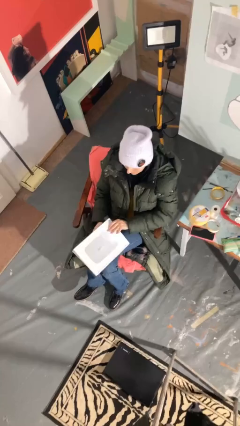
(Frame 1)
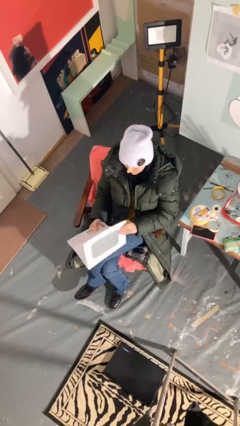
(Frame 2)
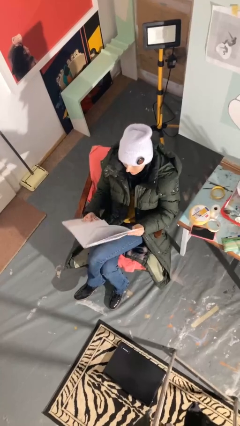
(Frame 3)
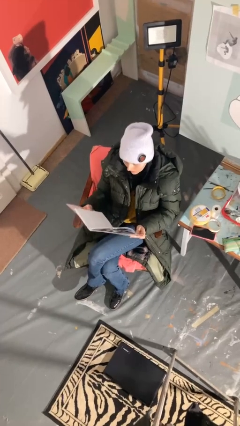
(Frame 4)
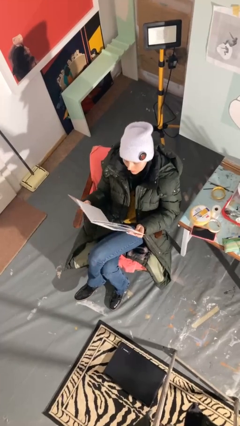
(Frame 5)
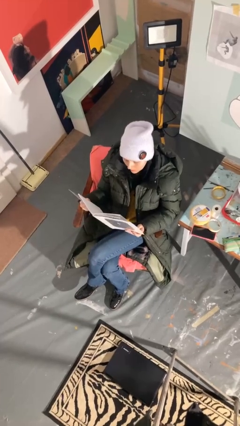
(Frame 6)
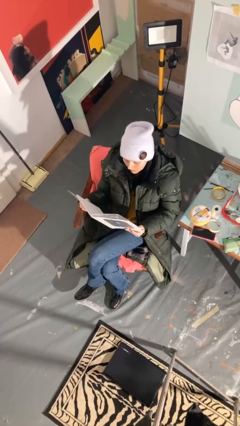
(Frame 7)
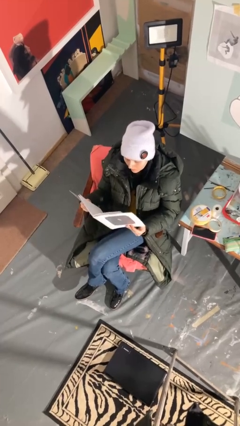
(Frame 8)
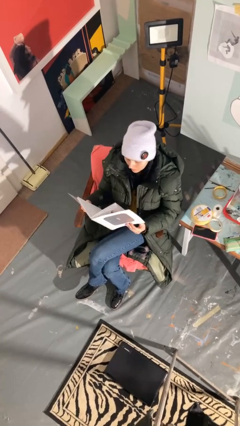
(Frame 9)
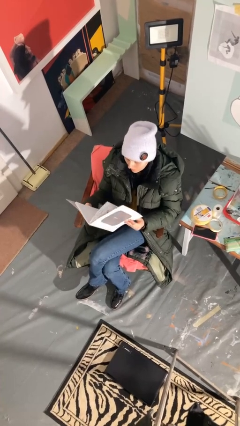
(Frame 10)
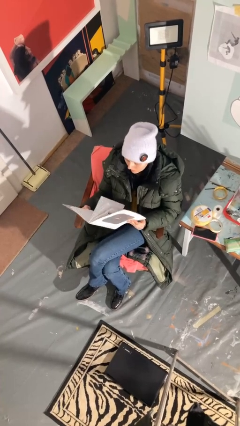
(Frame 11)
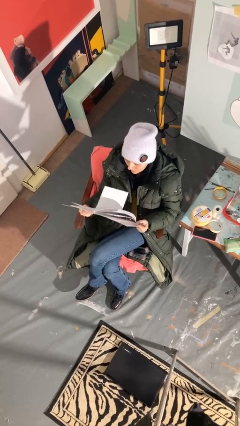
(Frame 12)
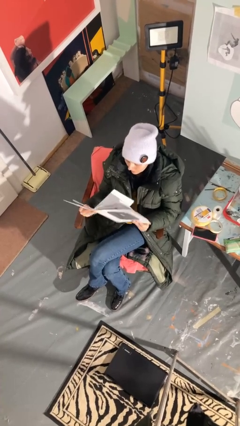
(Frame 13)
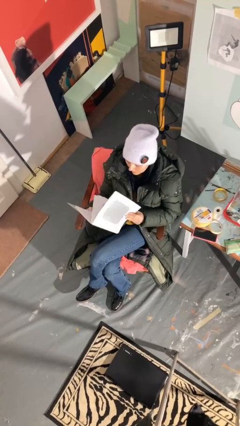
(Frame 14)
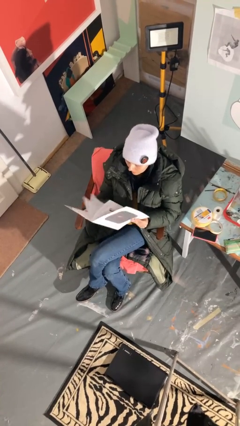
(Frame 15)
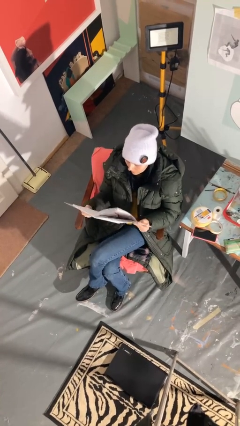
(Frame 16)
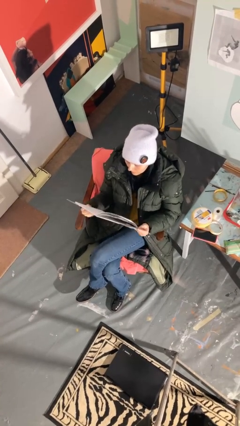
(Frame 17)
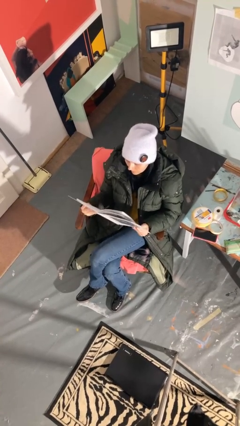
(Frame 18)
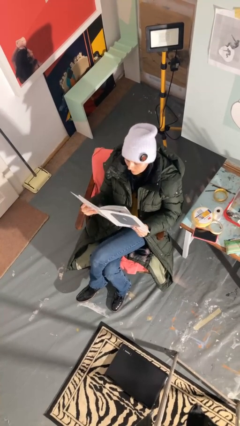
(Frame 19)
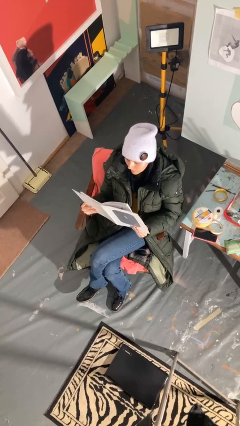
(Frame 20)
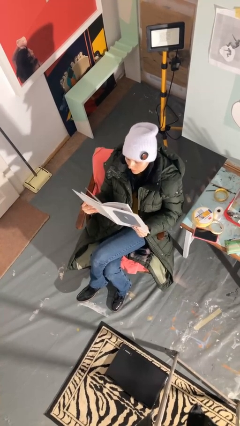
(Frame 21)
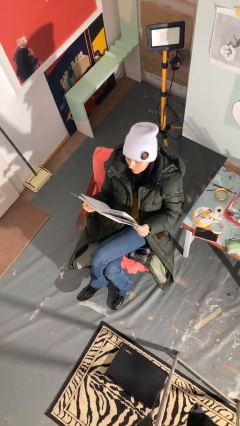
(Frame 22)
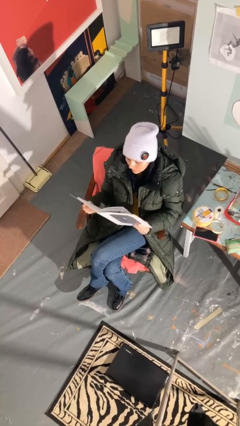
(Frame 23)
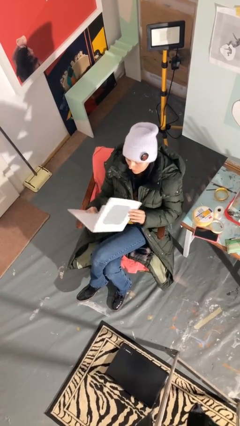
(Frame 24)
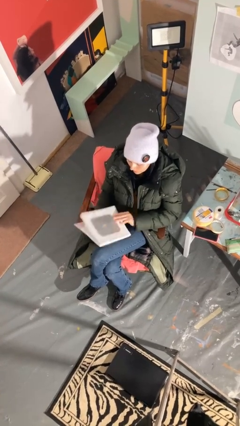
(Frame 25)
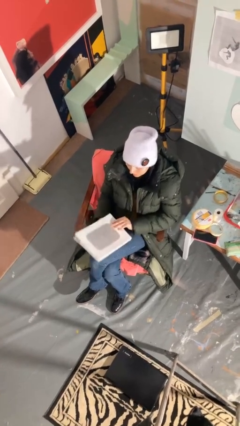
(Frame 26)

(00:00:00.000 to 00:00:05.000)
person reads document

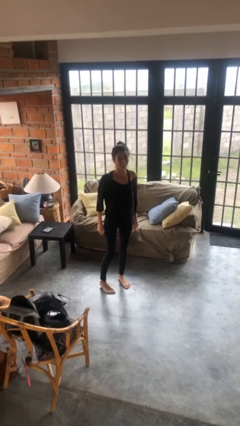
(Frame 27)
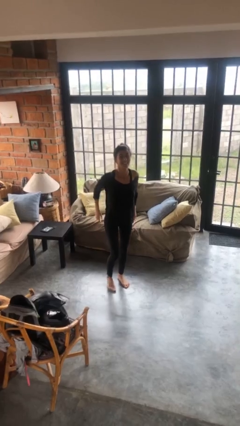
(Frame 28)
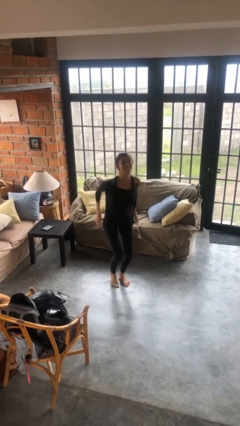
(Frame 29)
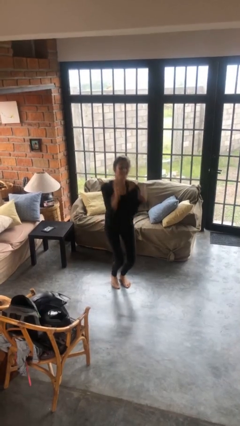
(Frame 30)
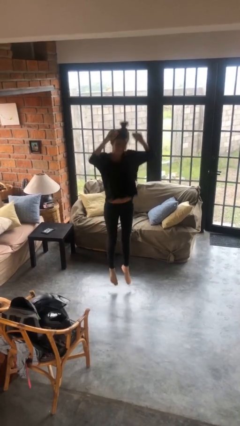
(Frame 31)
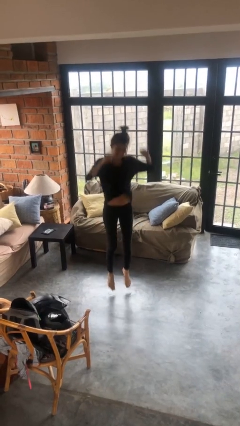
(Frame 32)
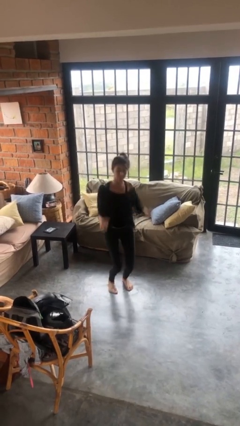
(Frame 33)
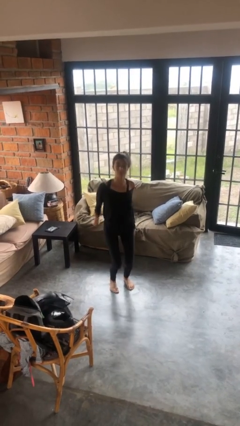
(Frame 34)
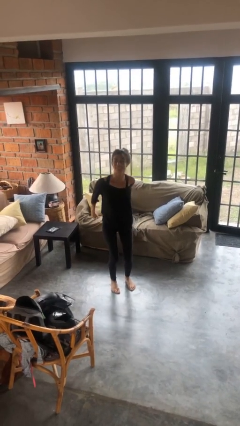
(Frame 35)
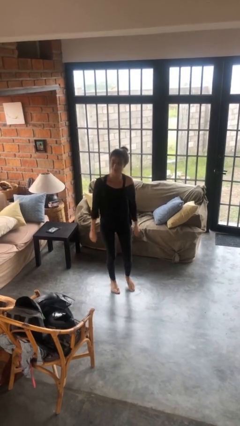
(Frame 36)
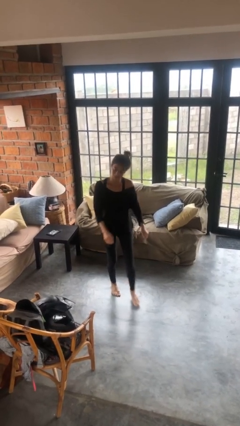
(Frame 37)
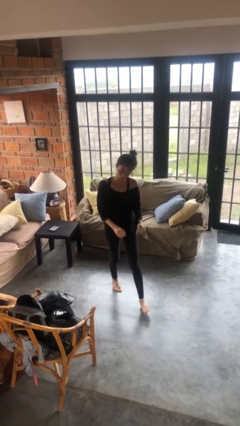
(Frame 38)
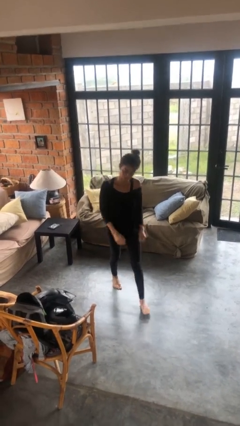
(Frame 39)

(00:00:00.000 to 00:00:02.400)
person jumps

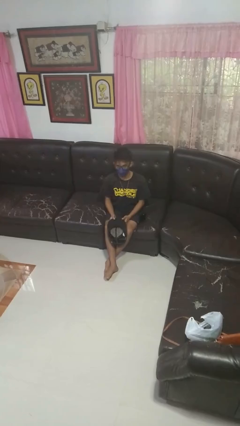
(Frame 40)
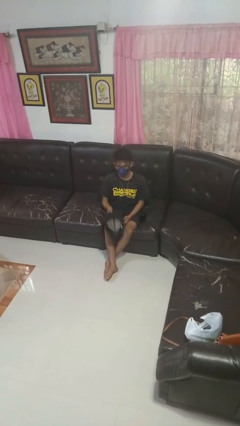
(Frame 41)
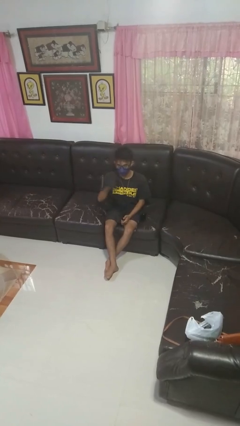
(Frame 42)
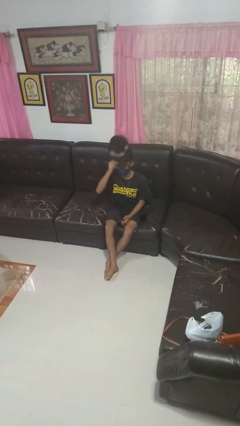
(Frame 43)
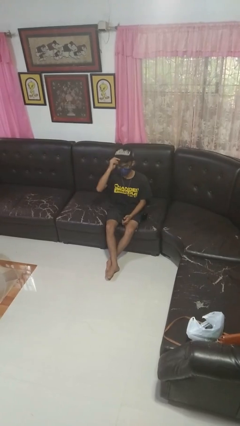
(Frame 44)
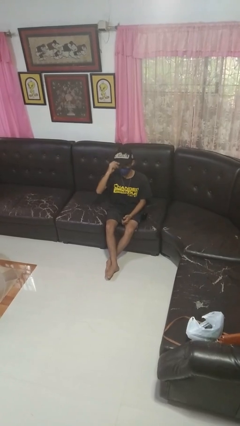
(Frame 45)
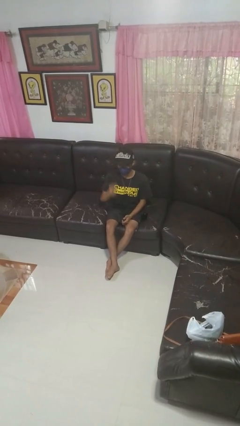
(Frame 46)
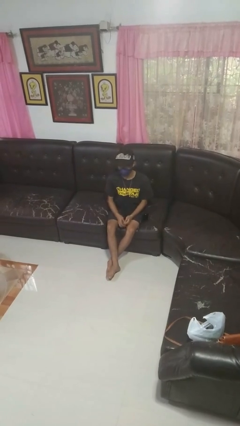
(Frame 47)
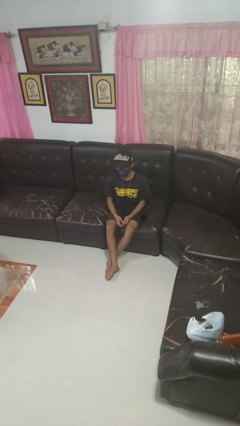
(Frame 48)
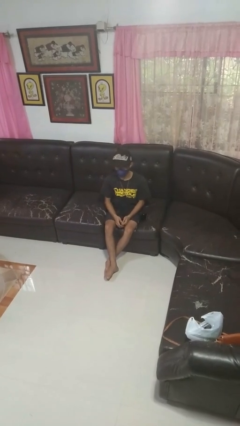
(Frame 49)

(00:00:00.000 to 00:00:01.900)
person puts on hat

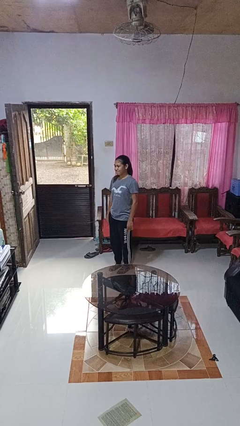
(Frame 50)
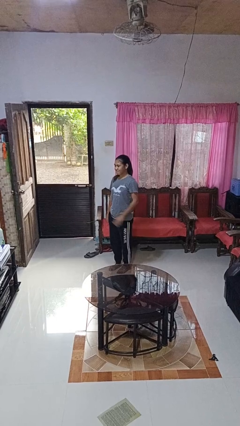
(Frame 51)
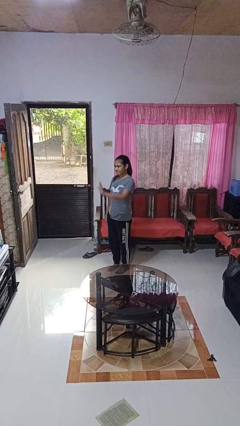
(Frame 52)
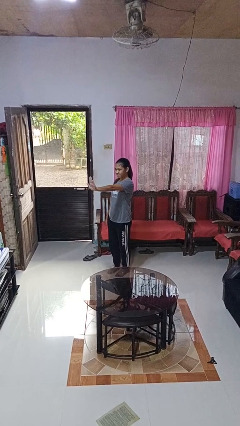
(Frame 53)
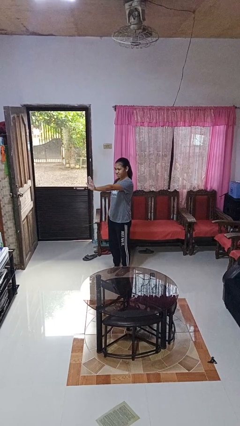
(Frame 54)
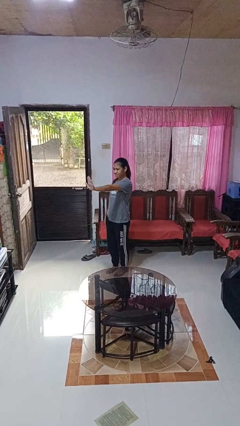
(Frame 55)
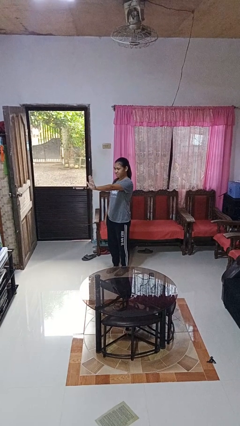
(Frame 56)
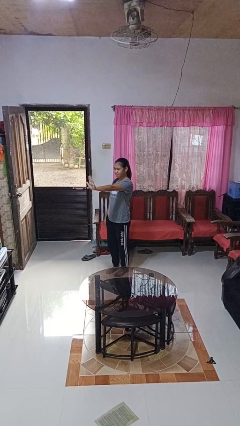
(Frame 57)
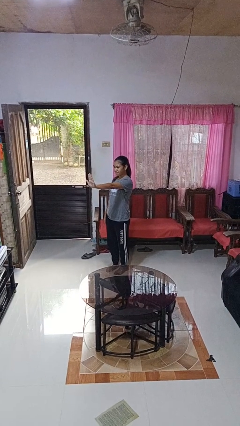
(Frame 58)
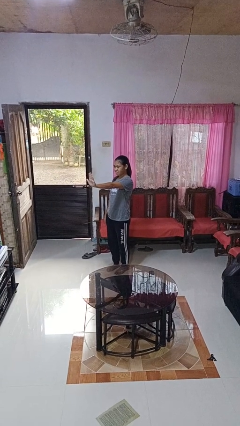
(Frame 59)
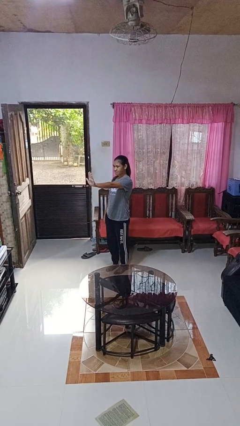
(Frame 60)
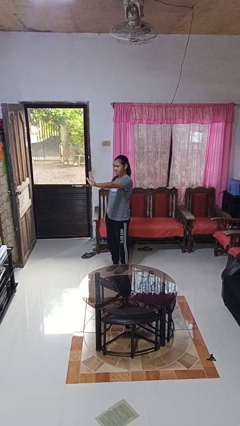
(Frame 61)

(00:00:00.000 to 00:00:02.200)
person gestures stop

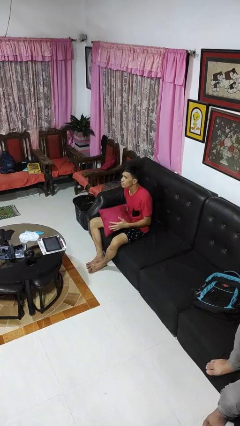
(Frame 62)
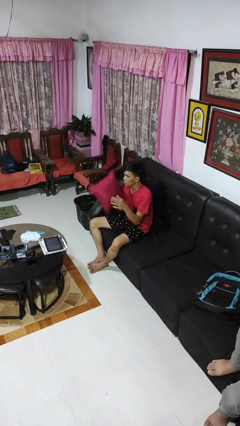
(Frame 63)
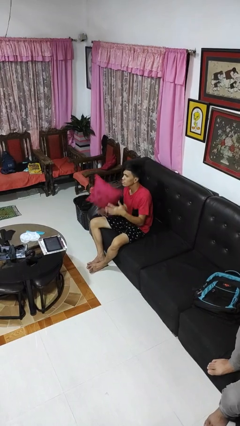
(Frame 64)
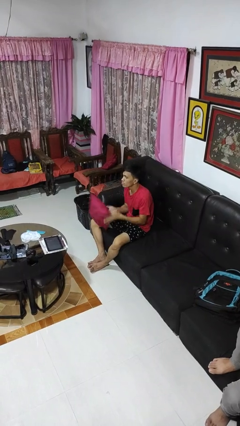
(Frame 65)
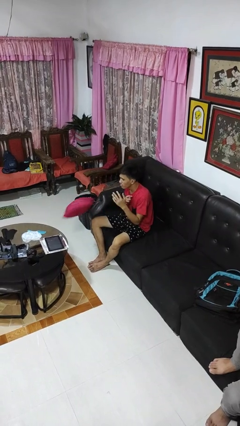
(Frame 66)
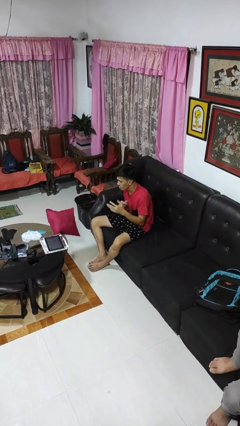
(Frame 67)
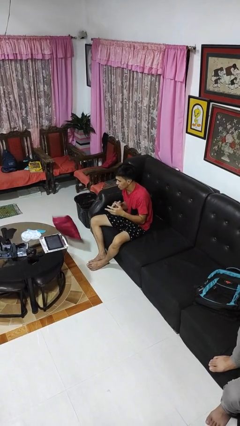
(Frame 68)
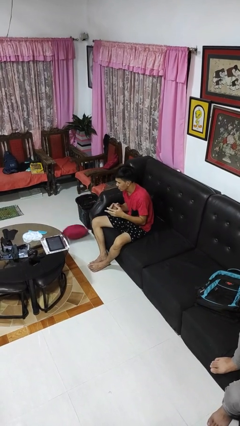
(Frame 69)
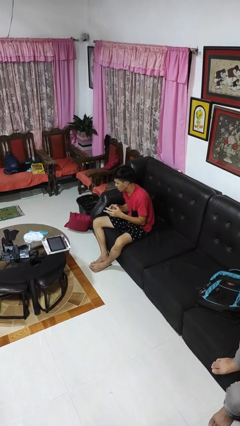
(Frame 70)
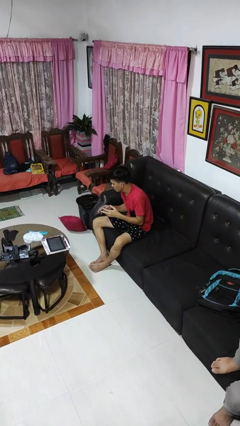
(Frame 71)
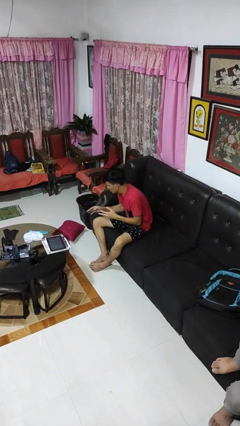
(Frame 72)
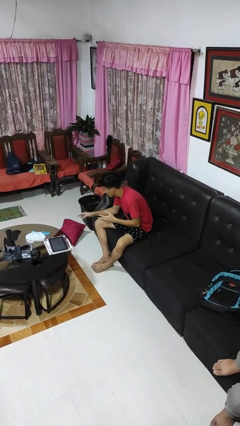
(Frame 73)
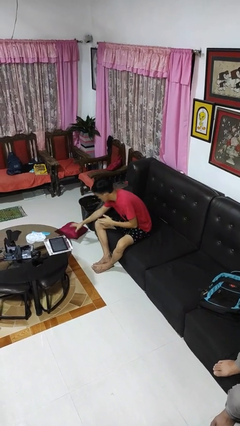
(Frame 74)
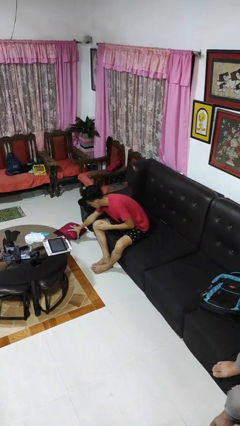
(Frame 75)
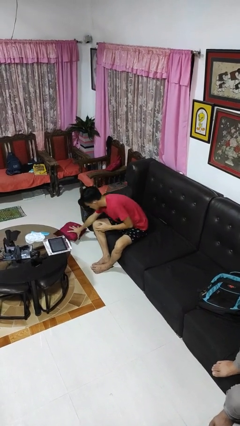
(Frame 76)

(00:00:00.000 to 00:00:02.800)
person drops object

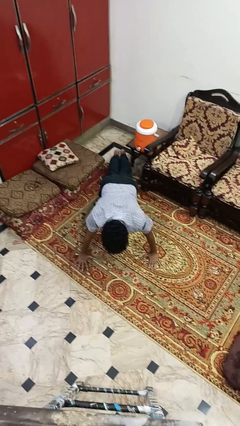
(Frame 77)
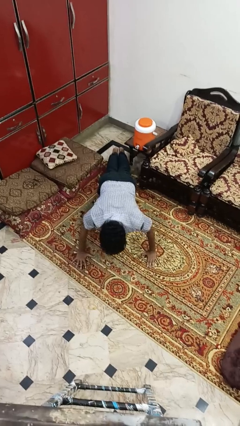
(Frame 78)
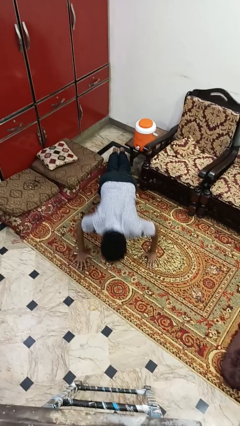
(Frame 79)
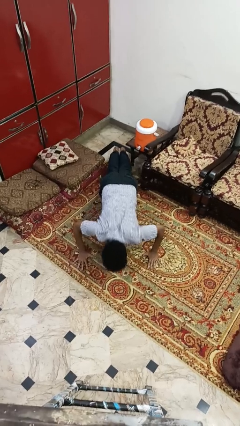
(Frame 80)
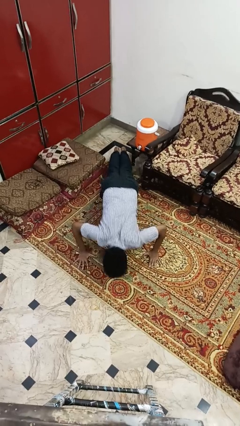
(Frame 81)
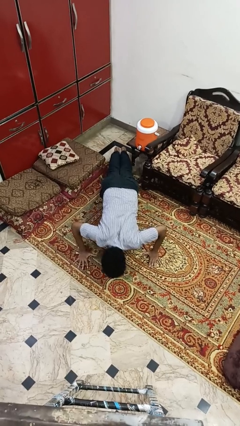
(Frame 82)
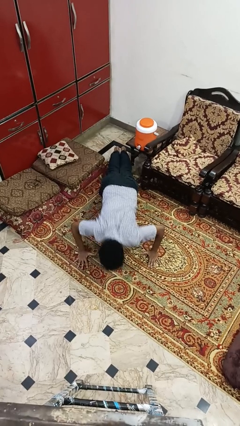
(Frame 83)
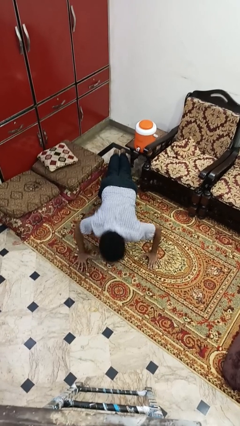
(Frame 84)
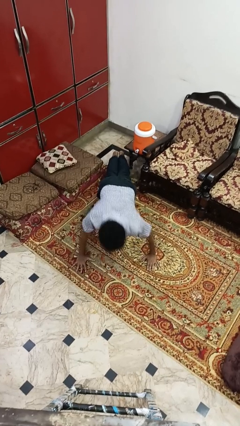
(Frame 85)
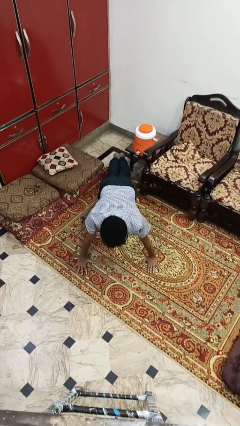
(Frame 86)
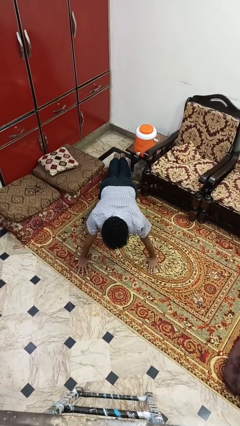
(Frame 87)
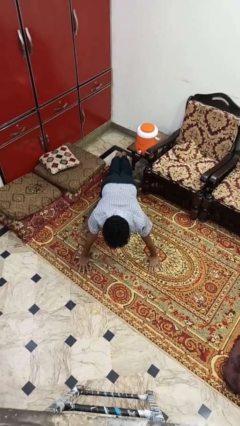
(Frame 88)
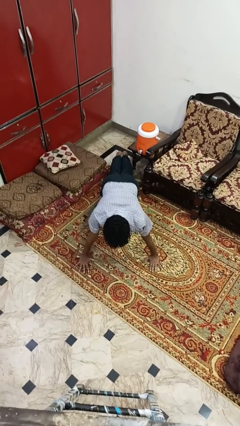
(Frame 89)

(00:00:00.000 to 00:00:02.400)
person exercises with pushup

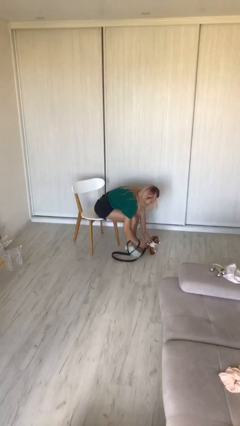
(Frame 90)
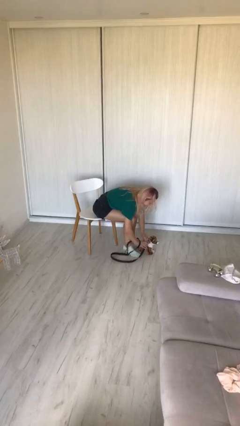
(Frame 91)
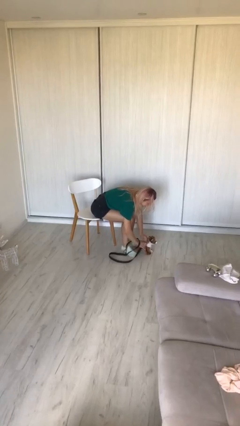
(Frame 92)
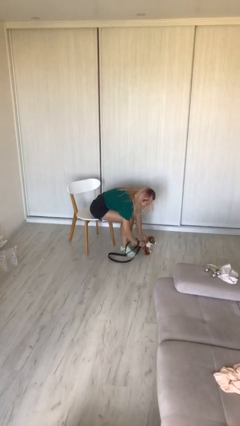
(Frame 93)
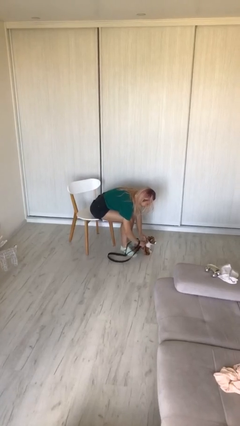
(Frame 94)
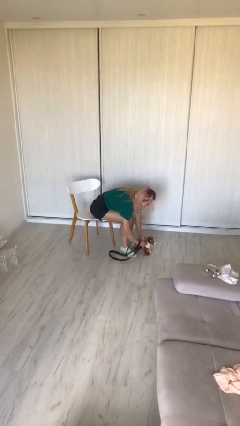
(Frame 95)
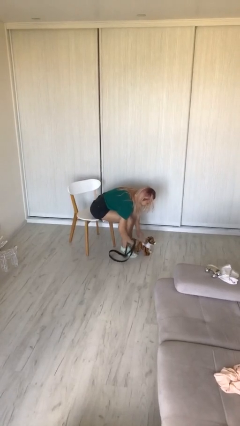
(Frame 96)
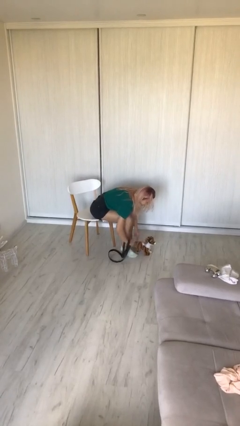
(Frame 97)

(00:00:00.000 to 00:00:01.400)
person unattaches leash from dog
